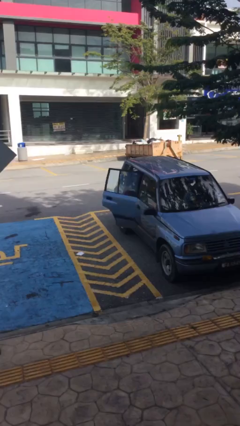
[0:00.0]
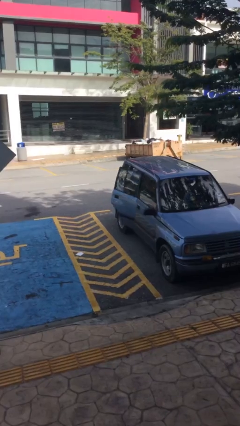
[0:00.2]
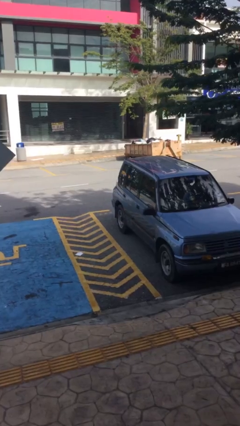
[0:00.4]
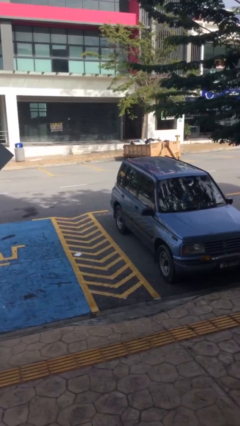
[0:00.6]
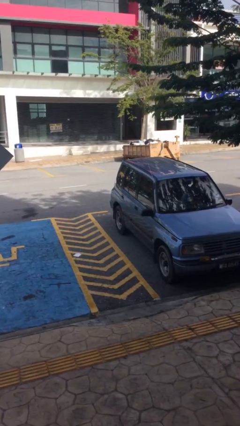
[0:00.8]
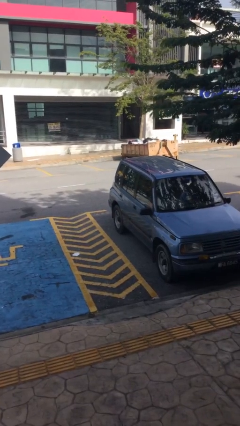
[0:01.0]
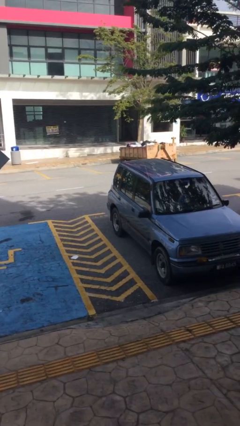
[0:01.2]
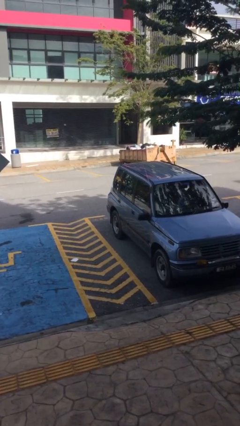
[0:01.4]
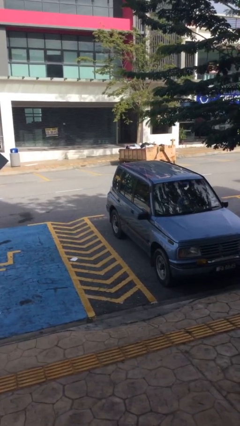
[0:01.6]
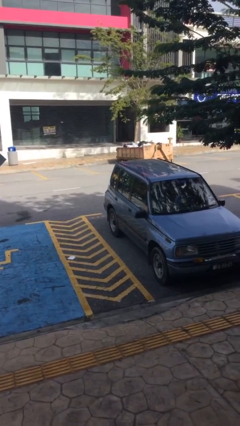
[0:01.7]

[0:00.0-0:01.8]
person closes car door

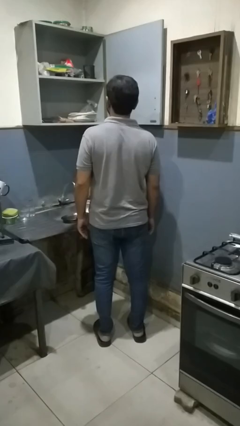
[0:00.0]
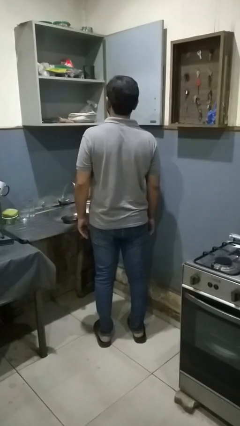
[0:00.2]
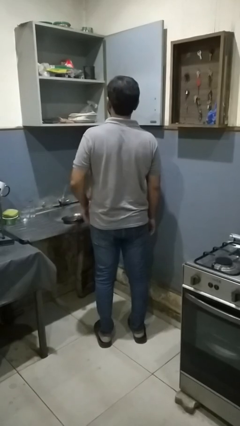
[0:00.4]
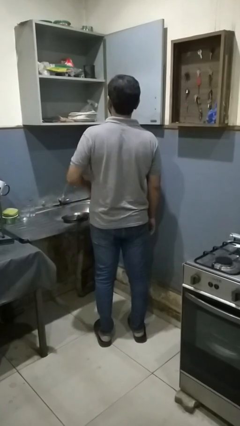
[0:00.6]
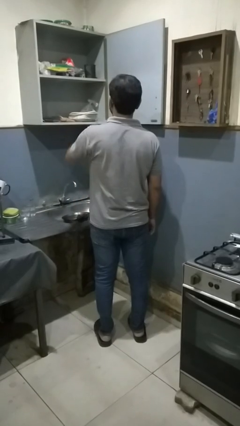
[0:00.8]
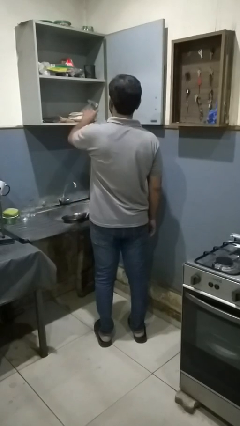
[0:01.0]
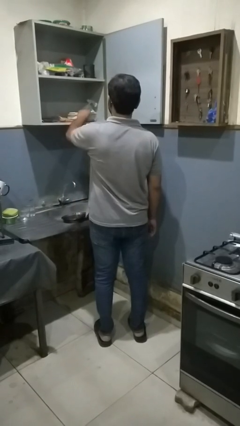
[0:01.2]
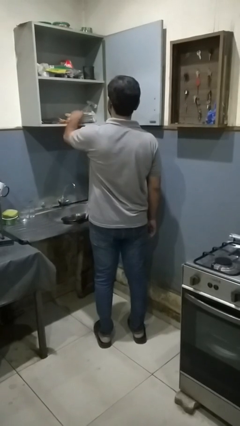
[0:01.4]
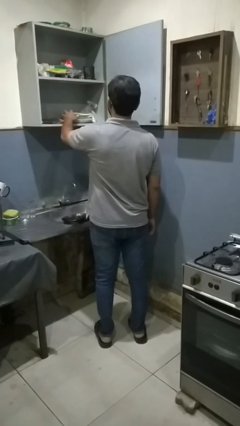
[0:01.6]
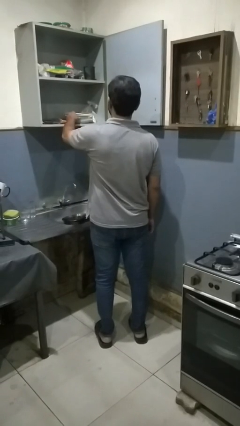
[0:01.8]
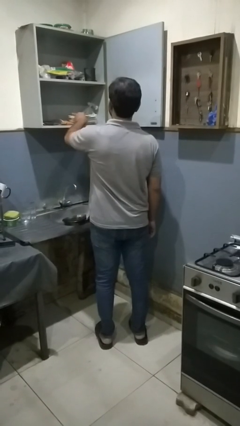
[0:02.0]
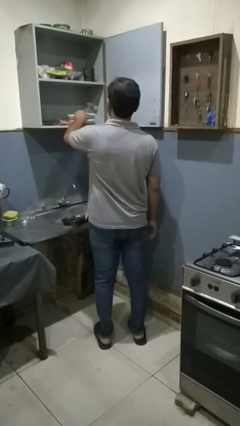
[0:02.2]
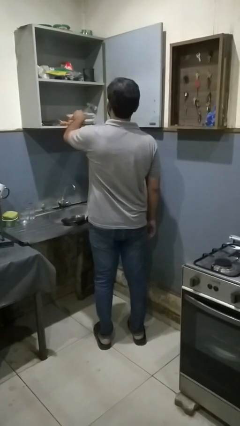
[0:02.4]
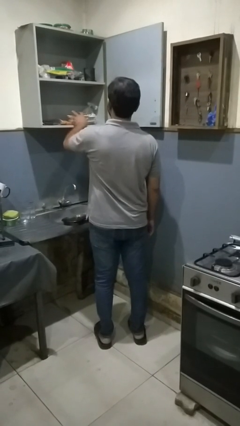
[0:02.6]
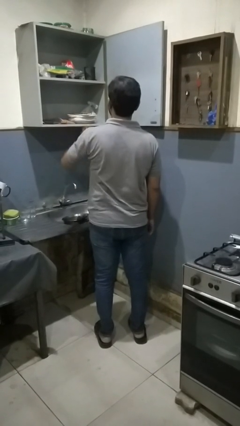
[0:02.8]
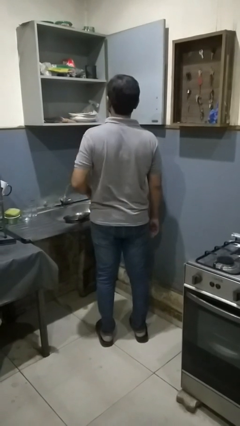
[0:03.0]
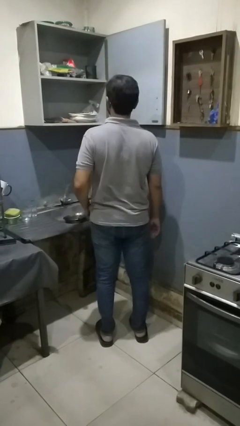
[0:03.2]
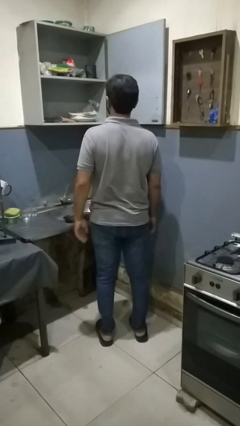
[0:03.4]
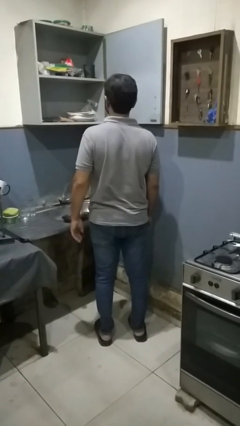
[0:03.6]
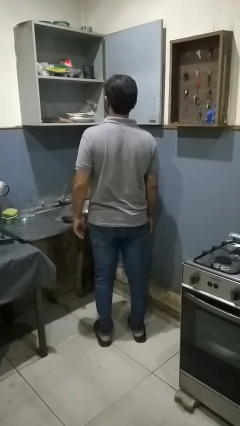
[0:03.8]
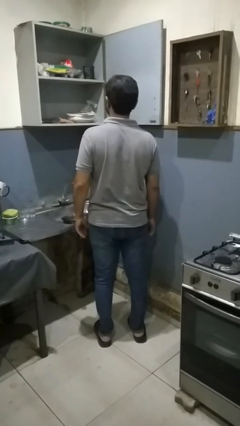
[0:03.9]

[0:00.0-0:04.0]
person searches in kitchen drawer

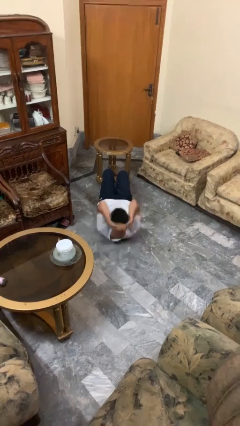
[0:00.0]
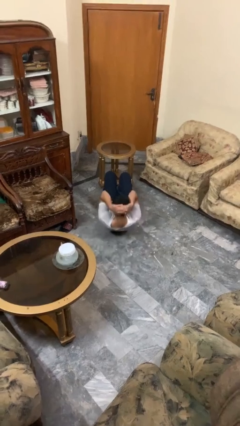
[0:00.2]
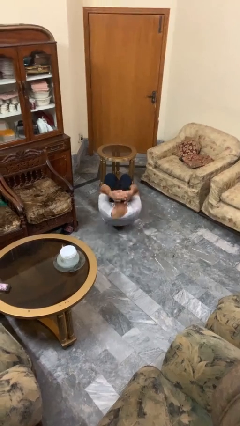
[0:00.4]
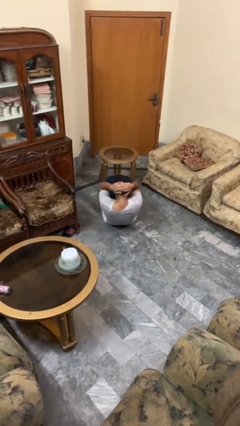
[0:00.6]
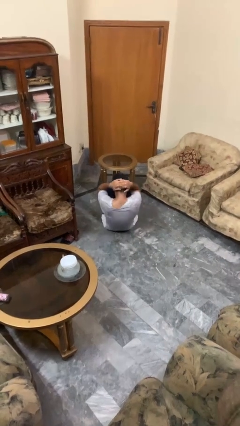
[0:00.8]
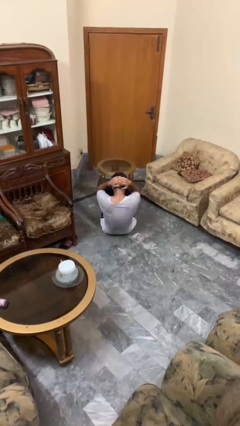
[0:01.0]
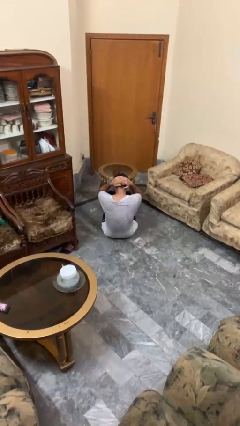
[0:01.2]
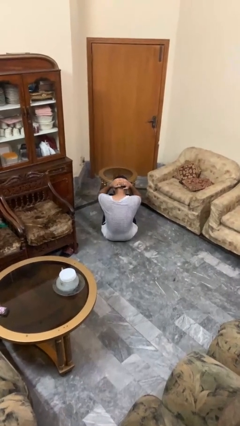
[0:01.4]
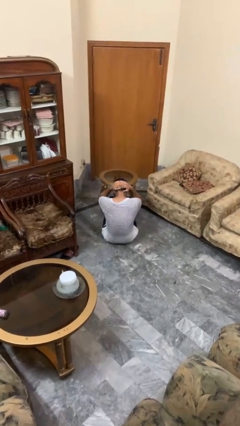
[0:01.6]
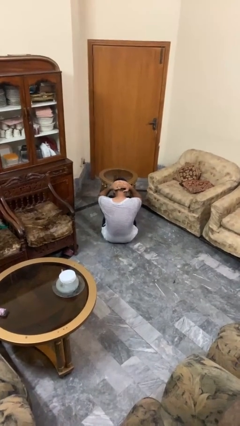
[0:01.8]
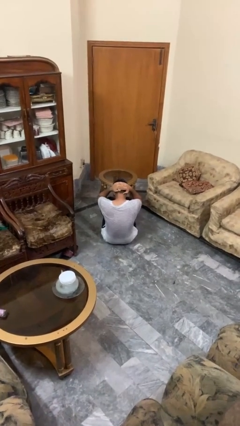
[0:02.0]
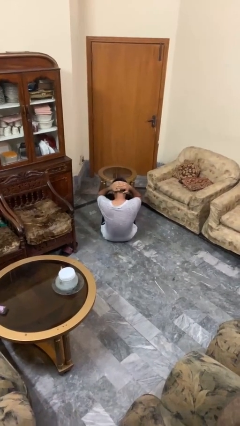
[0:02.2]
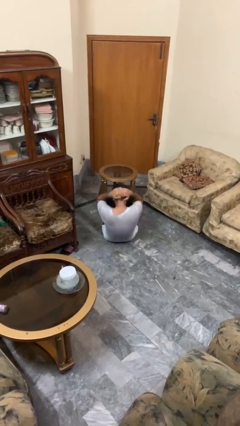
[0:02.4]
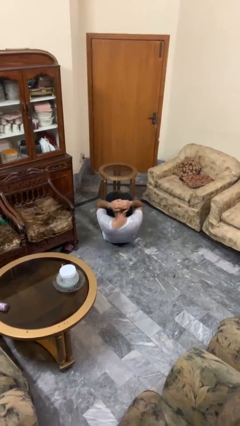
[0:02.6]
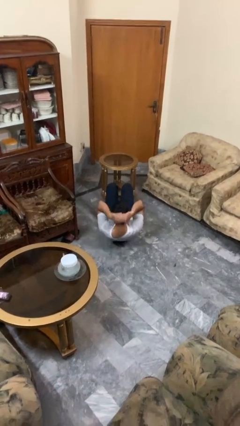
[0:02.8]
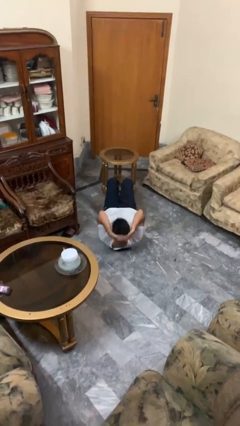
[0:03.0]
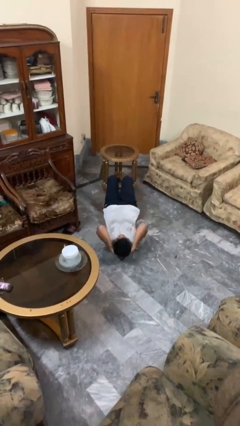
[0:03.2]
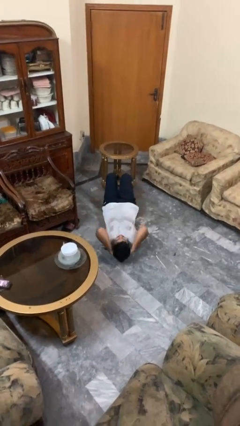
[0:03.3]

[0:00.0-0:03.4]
person exercises with situp

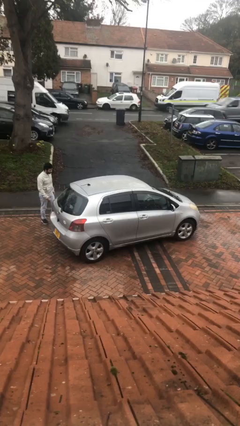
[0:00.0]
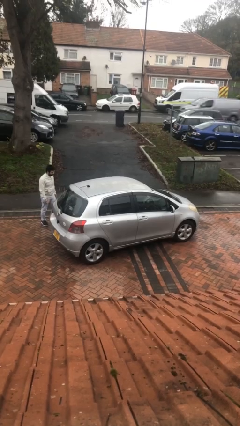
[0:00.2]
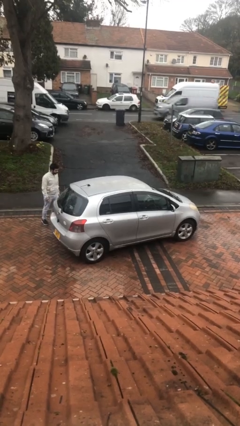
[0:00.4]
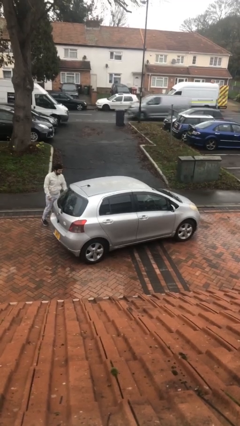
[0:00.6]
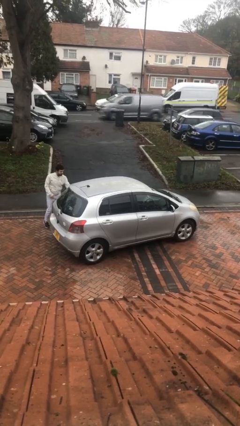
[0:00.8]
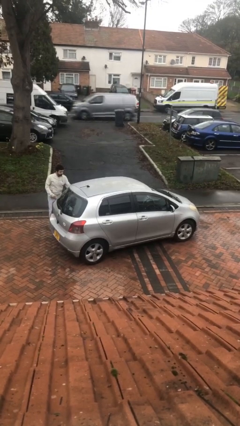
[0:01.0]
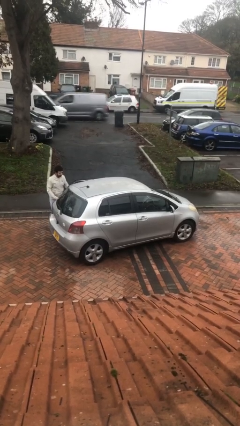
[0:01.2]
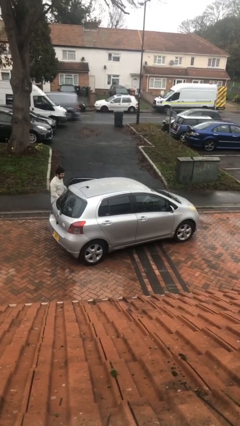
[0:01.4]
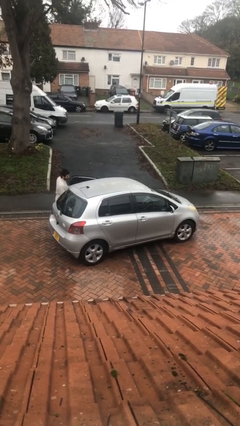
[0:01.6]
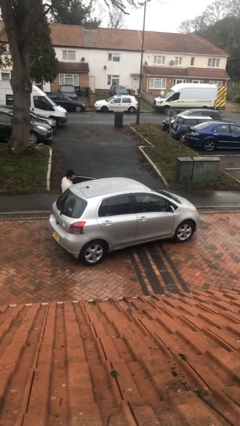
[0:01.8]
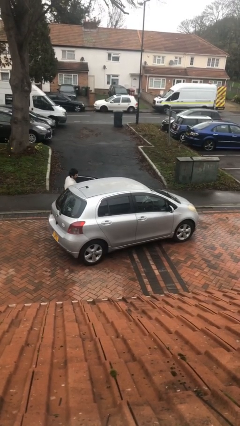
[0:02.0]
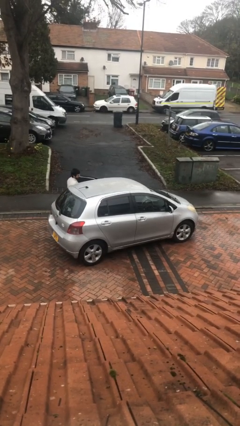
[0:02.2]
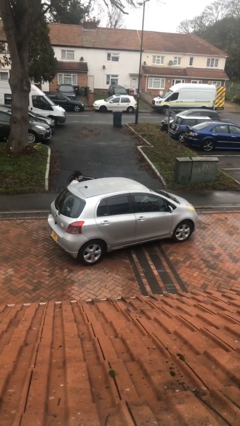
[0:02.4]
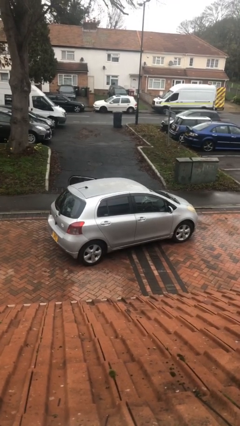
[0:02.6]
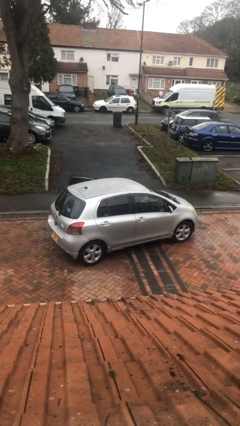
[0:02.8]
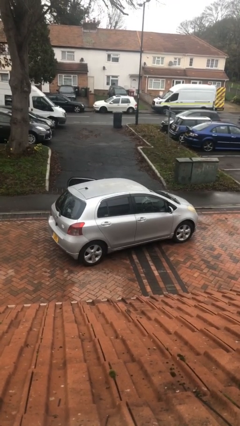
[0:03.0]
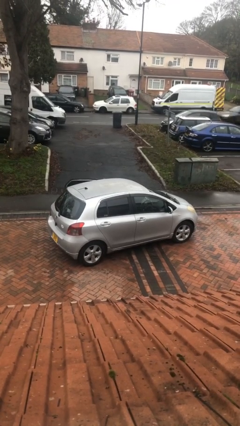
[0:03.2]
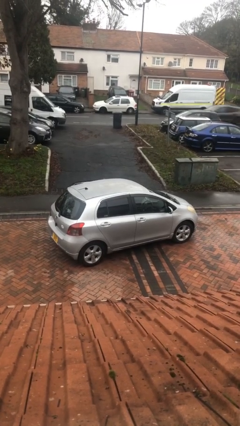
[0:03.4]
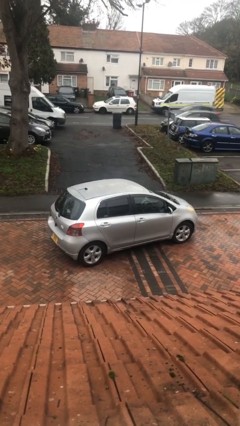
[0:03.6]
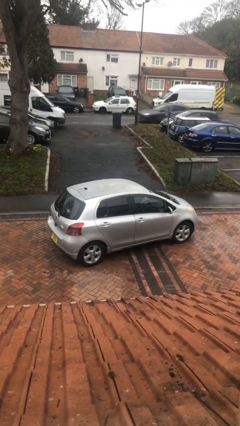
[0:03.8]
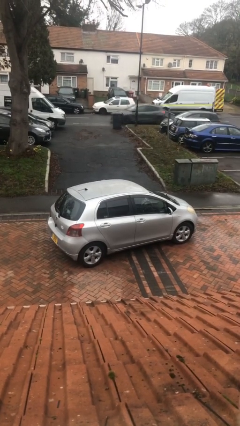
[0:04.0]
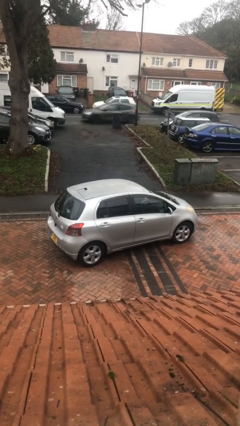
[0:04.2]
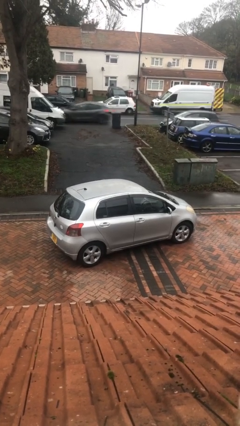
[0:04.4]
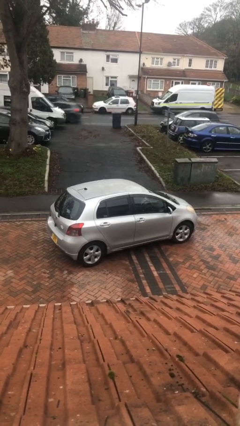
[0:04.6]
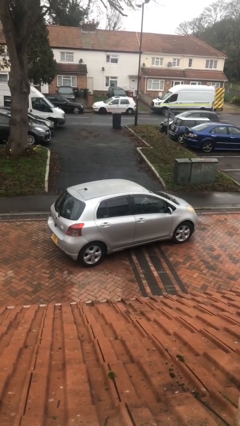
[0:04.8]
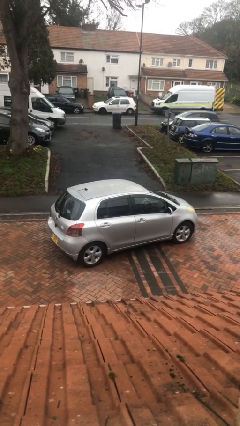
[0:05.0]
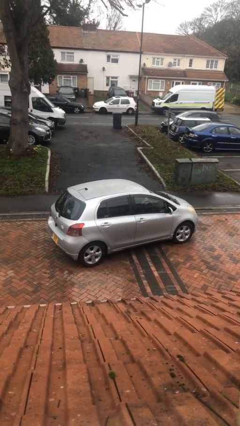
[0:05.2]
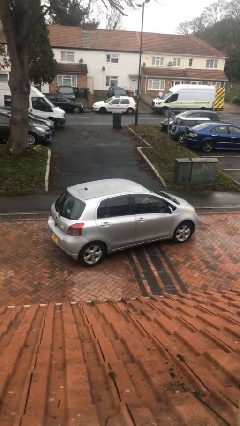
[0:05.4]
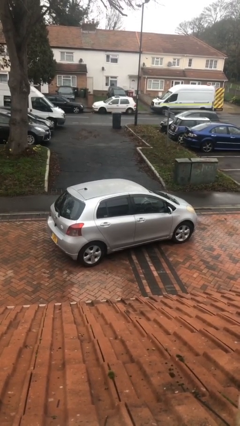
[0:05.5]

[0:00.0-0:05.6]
car picks up person

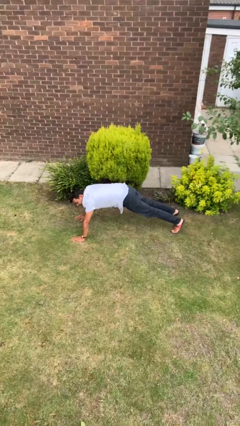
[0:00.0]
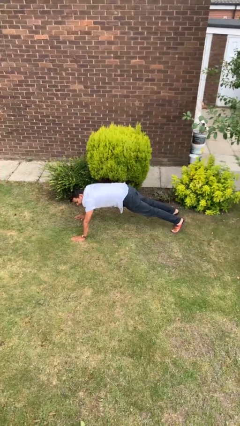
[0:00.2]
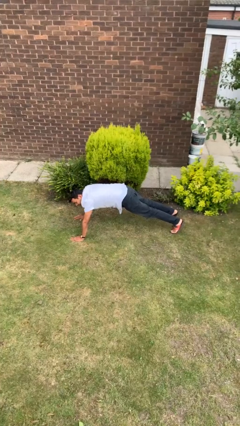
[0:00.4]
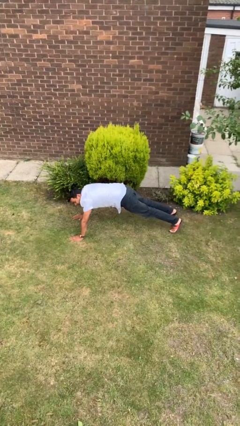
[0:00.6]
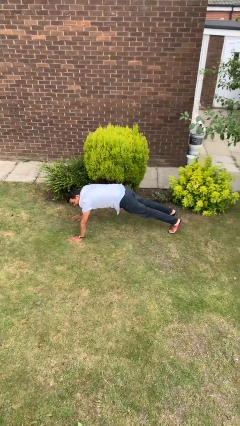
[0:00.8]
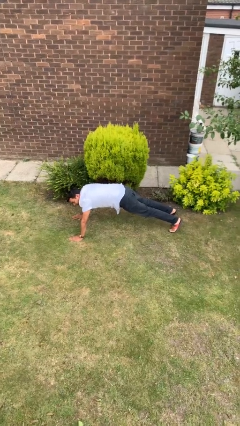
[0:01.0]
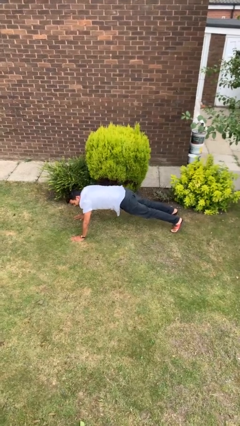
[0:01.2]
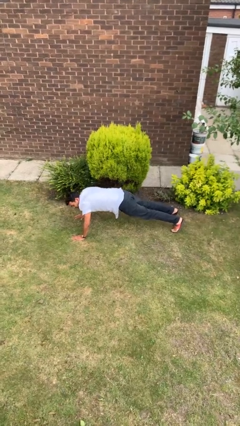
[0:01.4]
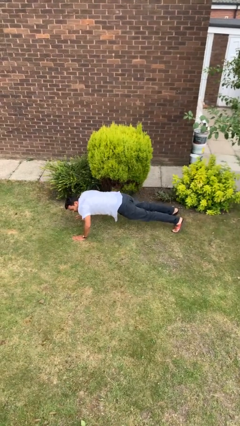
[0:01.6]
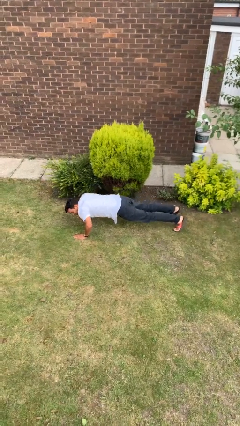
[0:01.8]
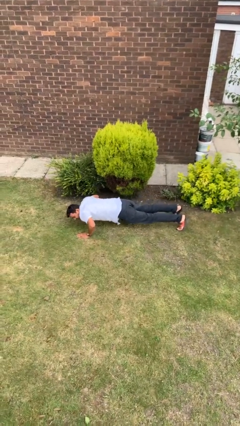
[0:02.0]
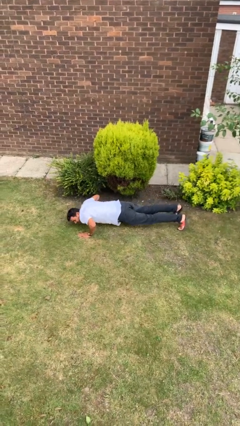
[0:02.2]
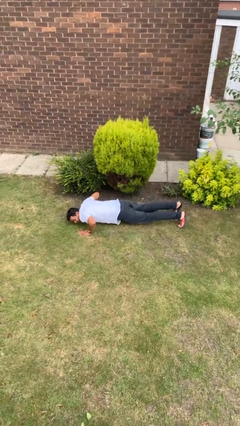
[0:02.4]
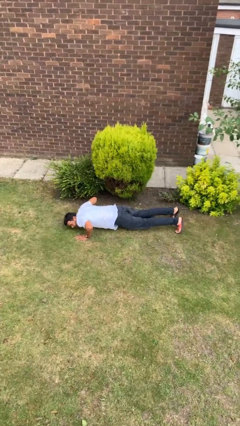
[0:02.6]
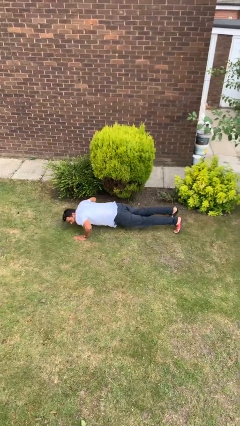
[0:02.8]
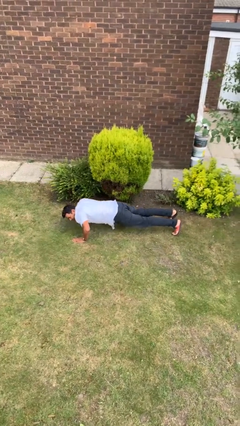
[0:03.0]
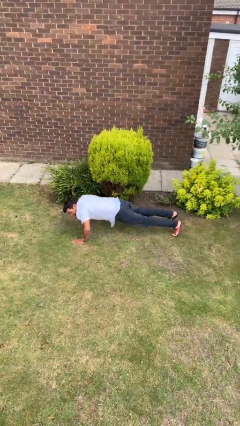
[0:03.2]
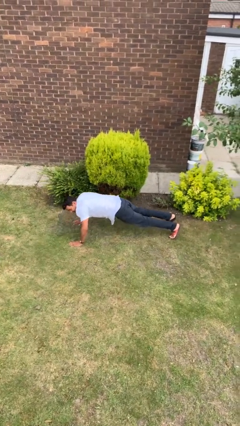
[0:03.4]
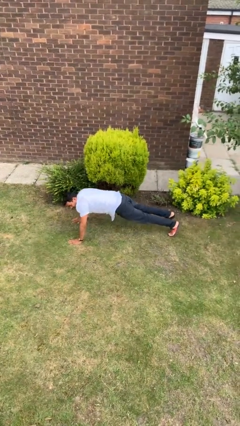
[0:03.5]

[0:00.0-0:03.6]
person exercises with pushup
